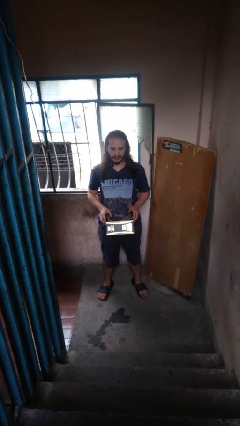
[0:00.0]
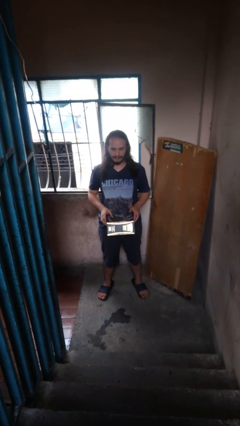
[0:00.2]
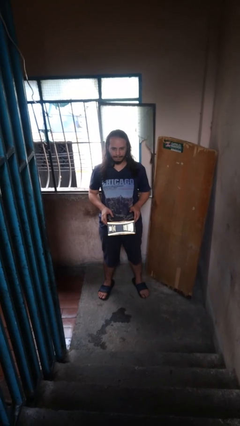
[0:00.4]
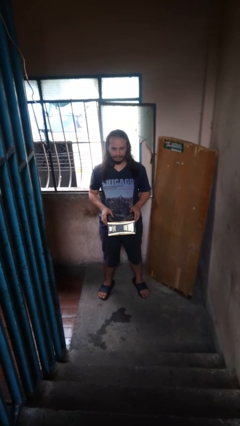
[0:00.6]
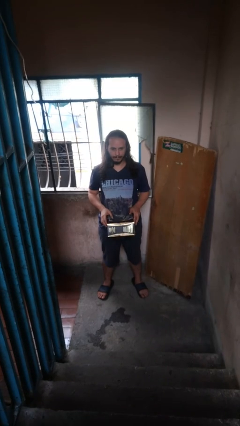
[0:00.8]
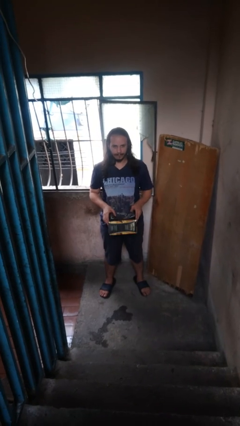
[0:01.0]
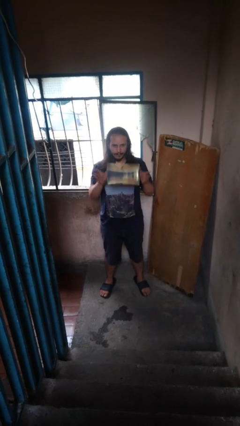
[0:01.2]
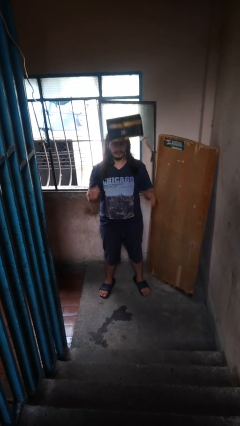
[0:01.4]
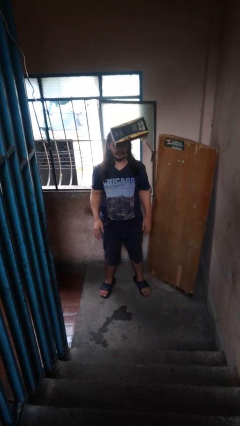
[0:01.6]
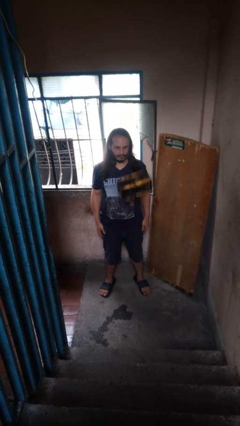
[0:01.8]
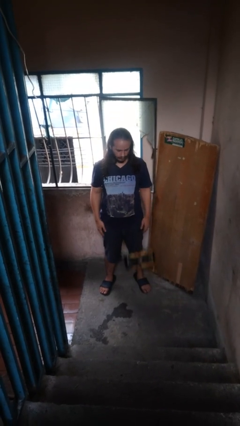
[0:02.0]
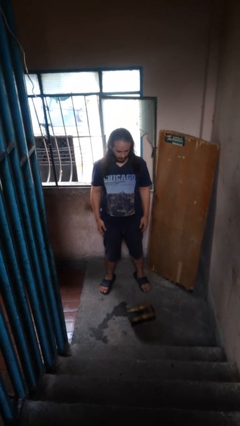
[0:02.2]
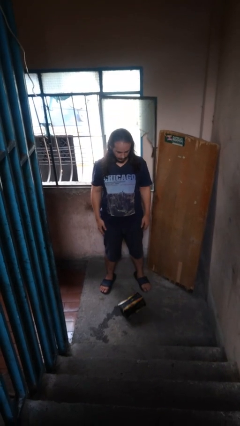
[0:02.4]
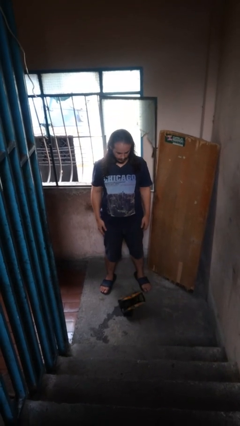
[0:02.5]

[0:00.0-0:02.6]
person throws object into air

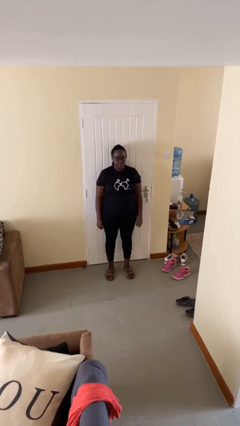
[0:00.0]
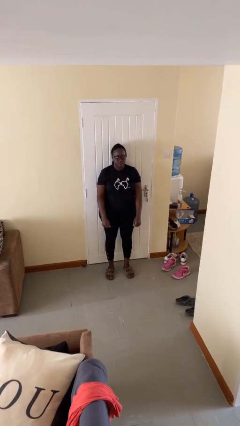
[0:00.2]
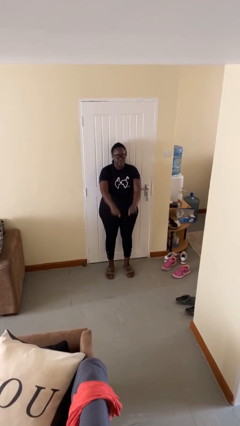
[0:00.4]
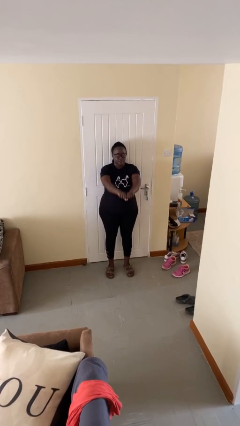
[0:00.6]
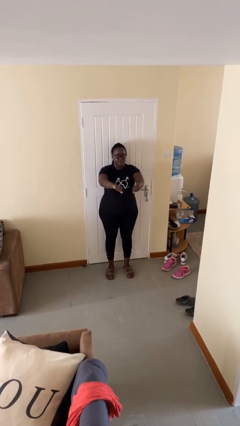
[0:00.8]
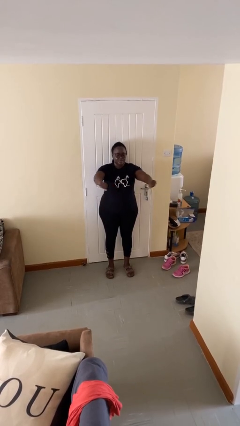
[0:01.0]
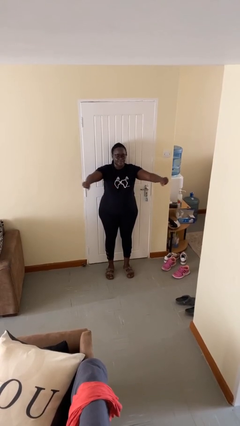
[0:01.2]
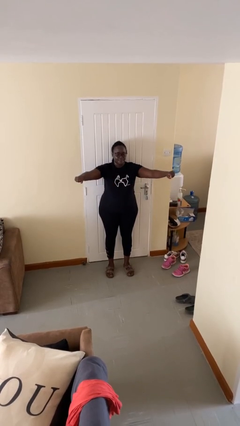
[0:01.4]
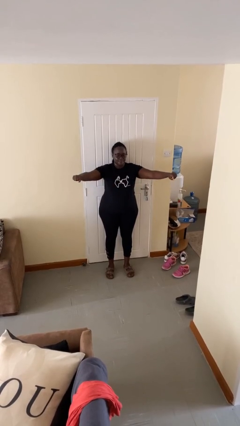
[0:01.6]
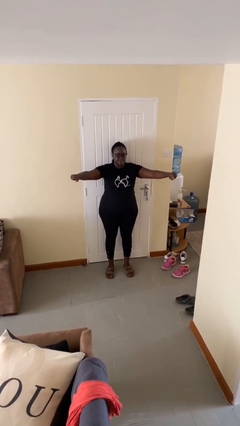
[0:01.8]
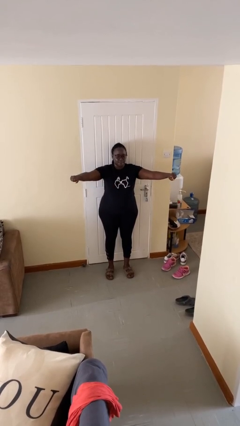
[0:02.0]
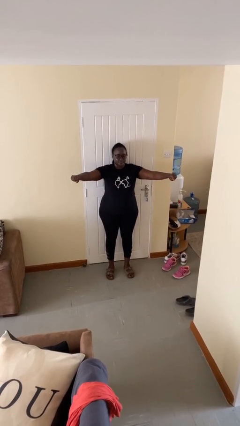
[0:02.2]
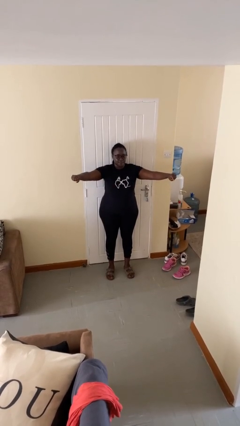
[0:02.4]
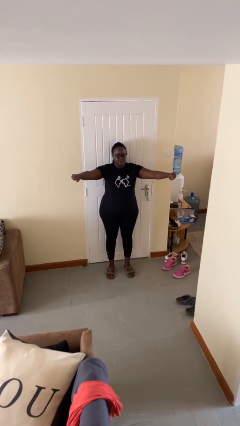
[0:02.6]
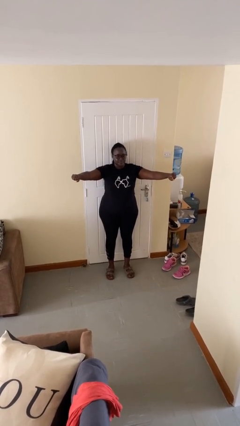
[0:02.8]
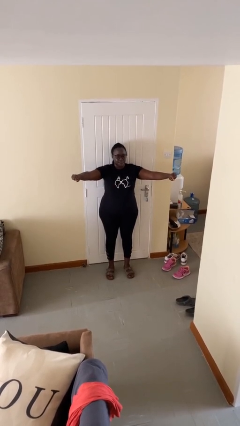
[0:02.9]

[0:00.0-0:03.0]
person gestures zoom in

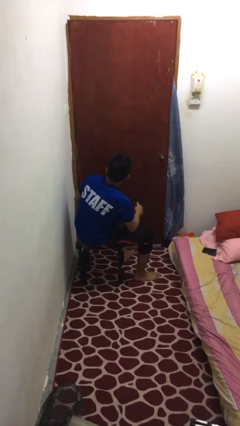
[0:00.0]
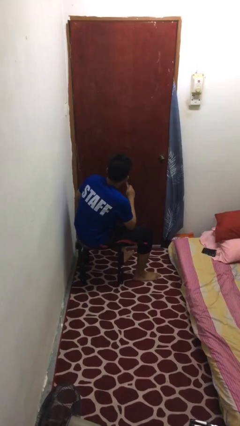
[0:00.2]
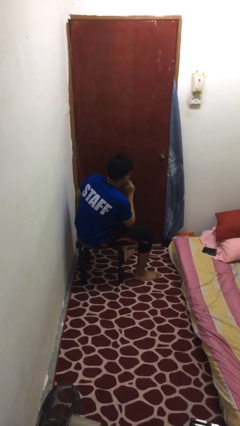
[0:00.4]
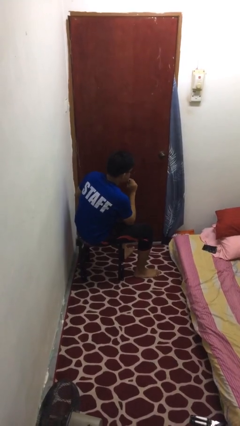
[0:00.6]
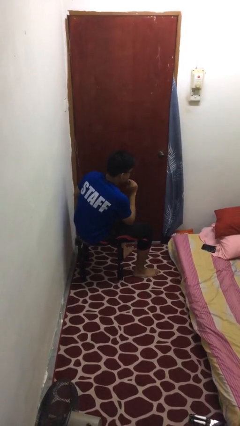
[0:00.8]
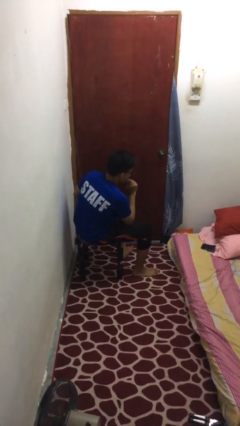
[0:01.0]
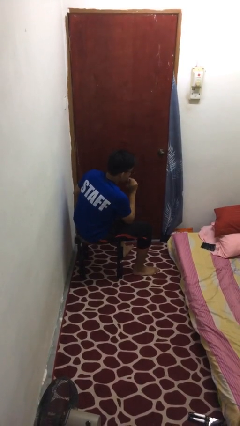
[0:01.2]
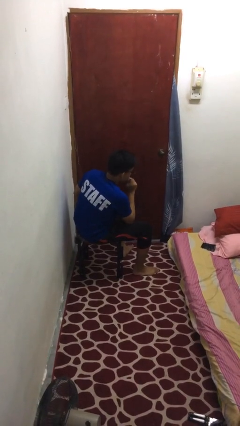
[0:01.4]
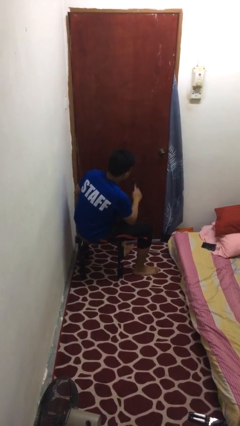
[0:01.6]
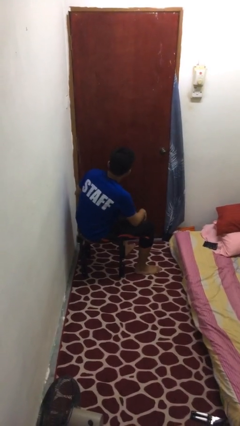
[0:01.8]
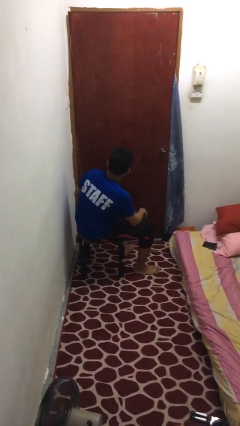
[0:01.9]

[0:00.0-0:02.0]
person vapes

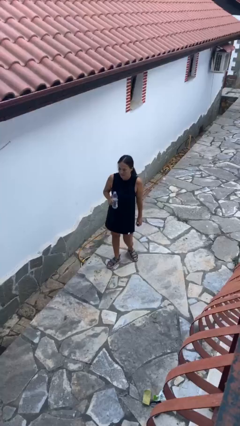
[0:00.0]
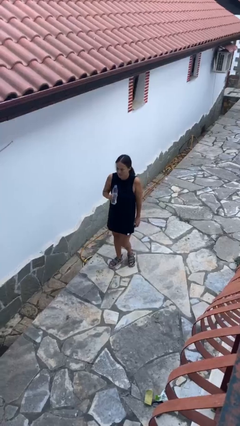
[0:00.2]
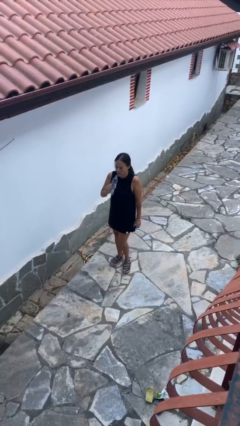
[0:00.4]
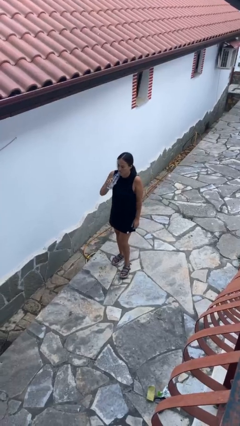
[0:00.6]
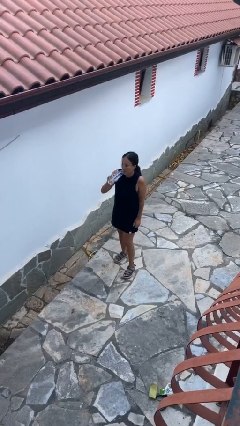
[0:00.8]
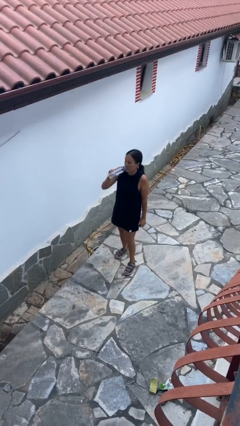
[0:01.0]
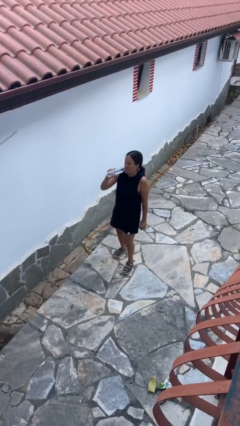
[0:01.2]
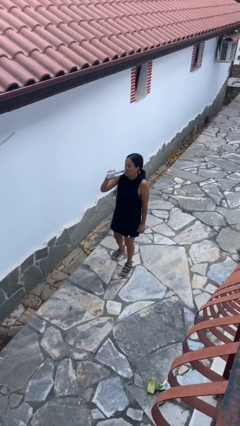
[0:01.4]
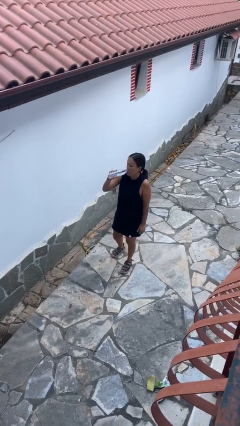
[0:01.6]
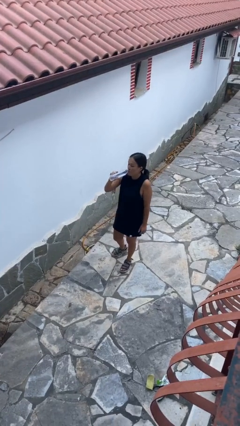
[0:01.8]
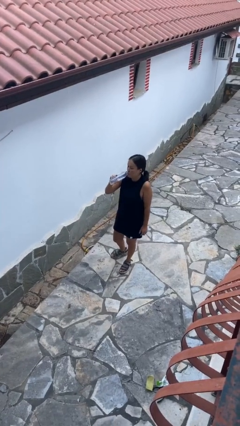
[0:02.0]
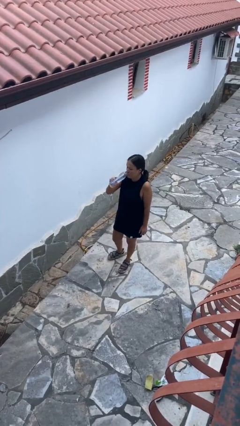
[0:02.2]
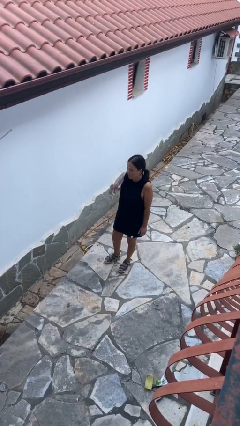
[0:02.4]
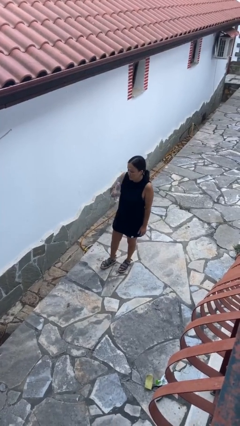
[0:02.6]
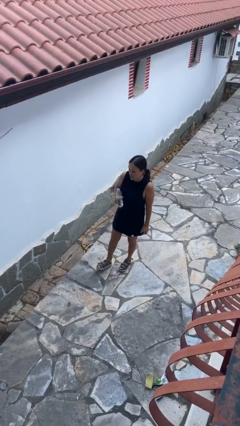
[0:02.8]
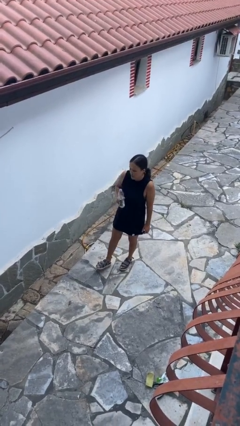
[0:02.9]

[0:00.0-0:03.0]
person drinks from bottle

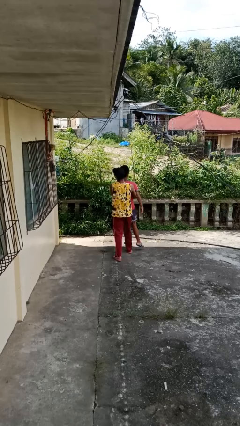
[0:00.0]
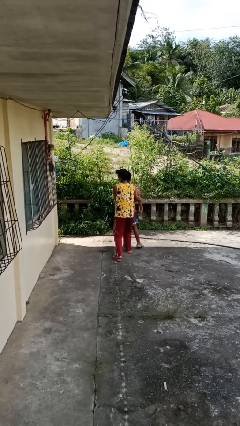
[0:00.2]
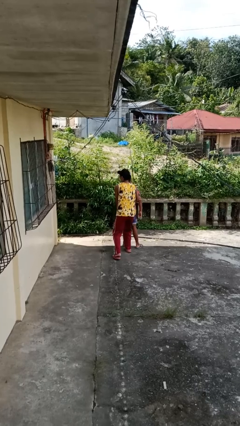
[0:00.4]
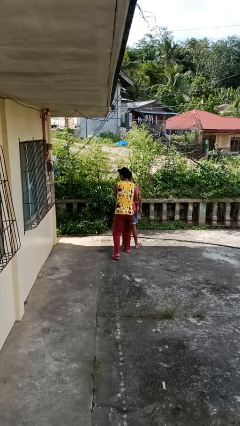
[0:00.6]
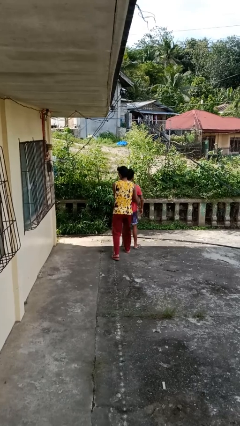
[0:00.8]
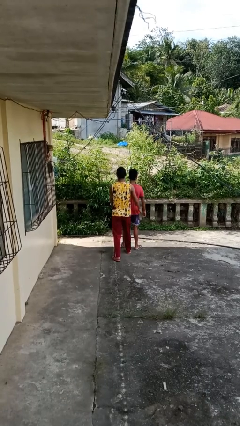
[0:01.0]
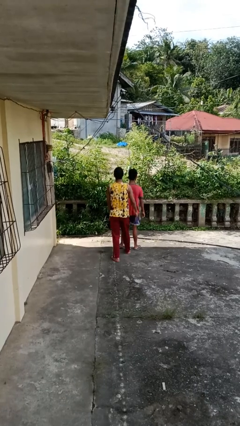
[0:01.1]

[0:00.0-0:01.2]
person puts down person

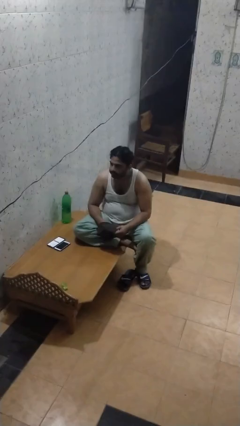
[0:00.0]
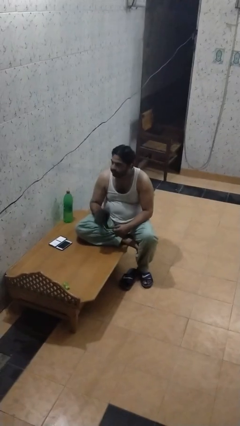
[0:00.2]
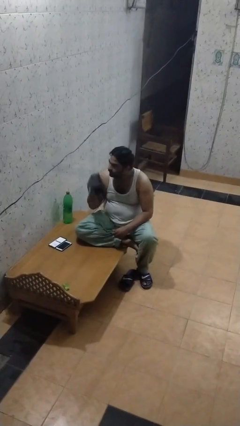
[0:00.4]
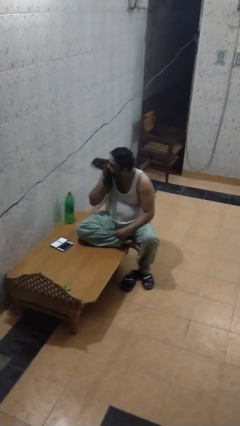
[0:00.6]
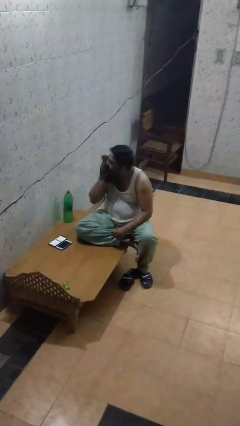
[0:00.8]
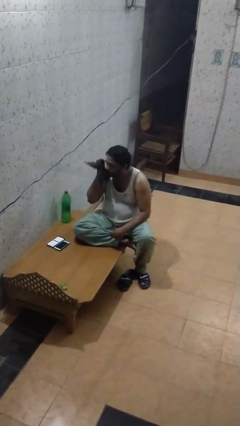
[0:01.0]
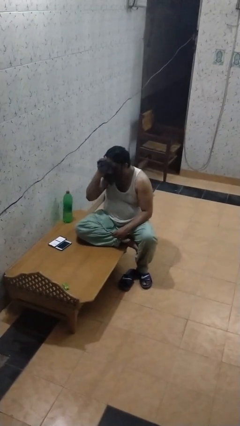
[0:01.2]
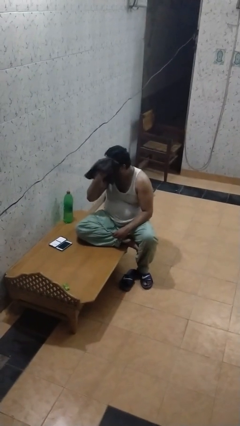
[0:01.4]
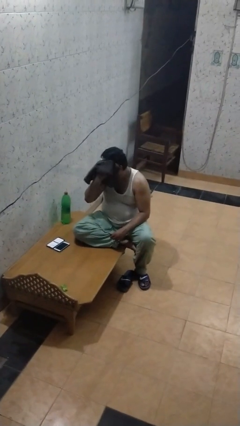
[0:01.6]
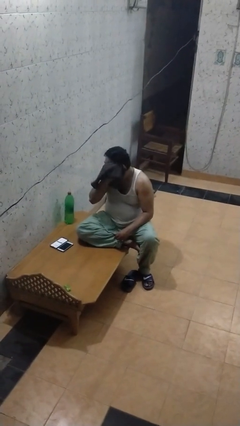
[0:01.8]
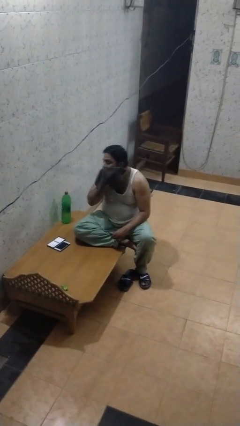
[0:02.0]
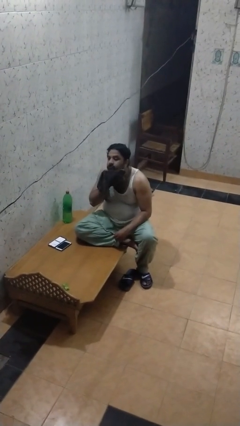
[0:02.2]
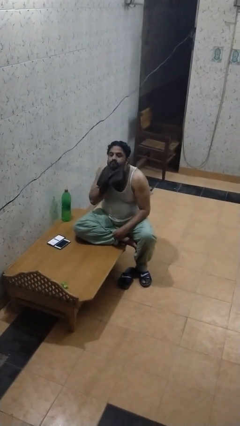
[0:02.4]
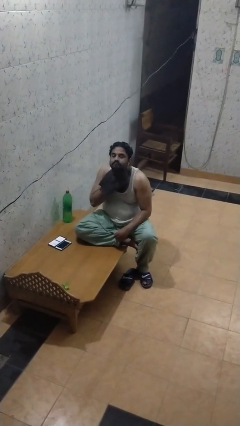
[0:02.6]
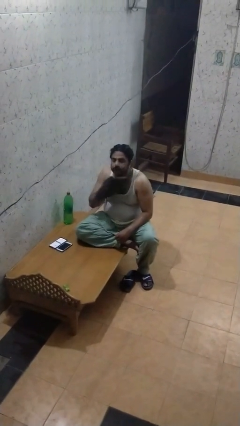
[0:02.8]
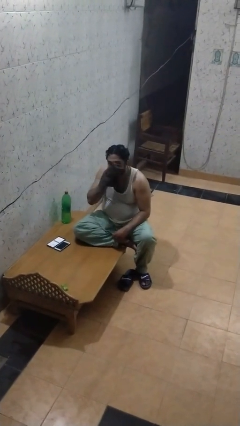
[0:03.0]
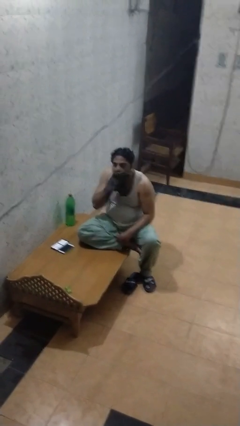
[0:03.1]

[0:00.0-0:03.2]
person wipes mouth with napkin

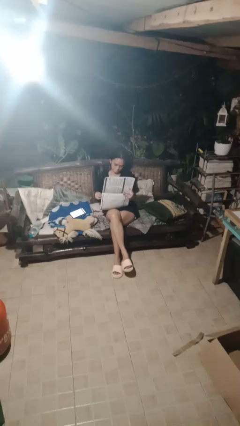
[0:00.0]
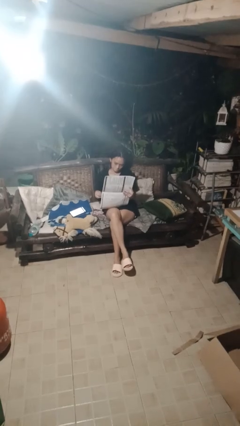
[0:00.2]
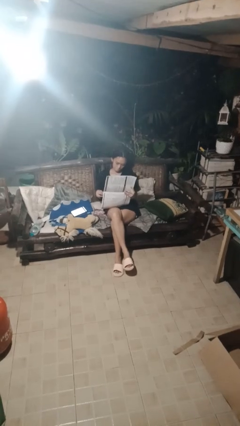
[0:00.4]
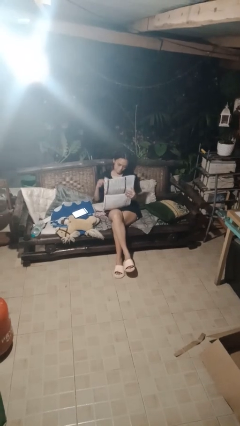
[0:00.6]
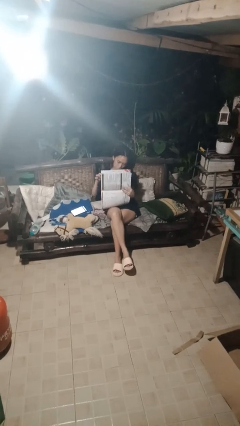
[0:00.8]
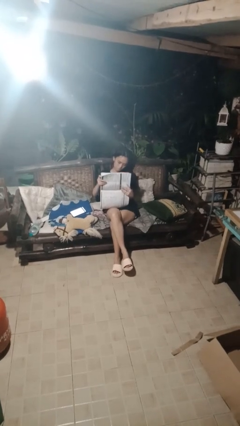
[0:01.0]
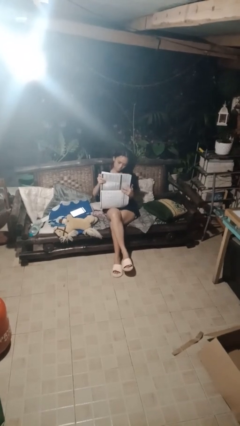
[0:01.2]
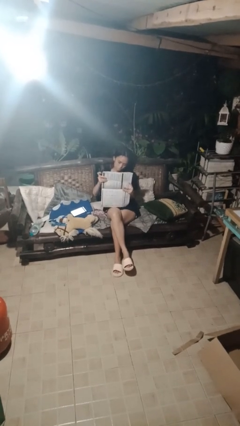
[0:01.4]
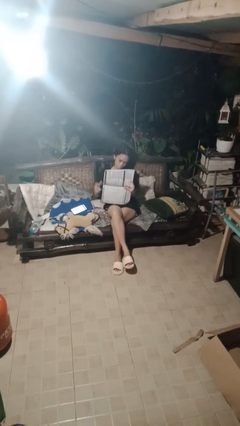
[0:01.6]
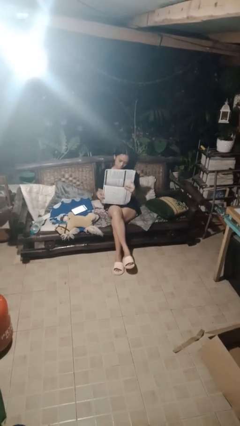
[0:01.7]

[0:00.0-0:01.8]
person reads newspaper

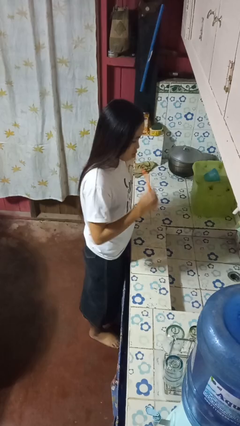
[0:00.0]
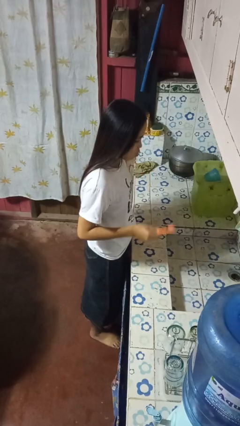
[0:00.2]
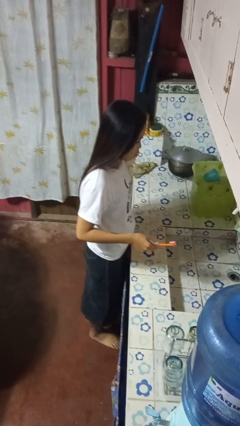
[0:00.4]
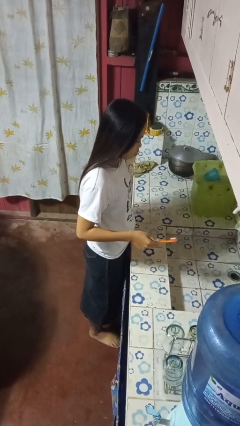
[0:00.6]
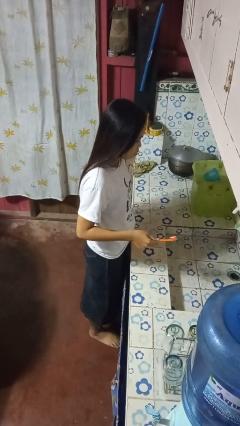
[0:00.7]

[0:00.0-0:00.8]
person brushes teeth
